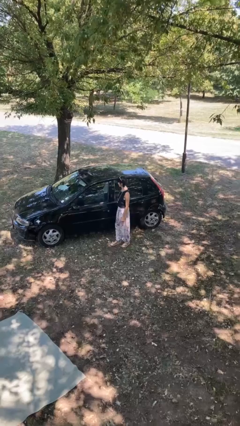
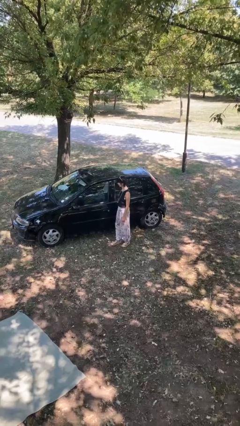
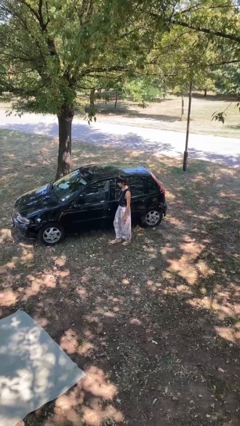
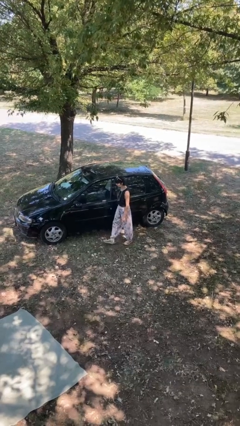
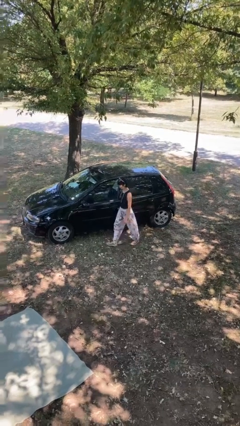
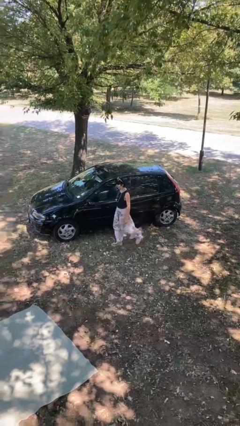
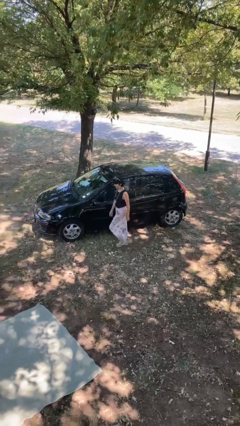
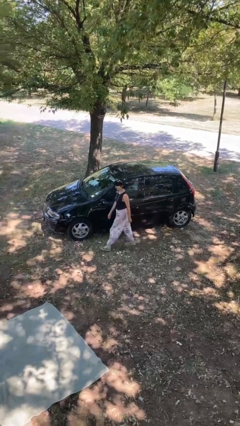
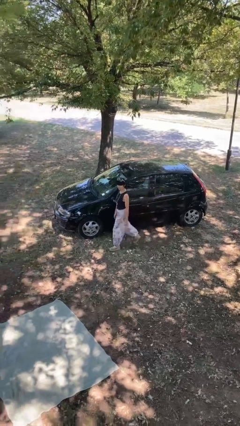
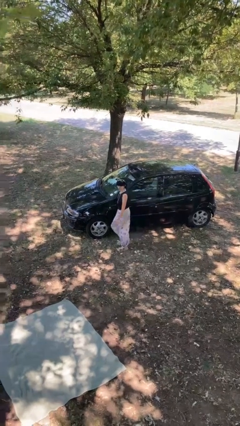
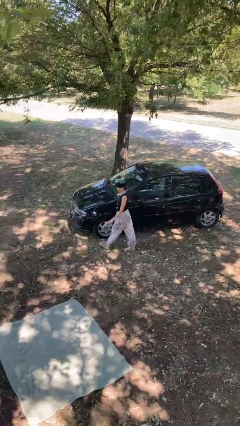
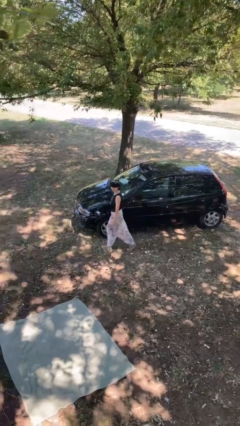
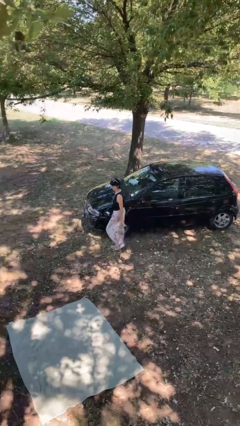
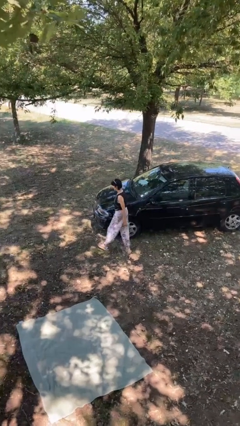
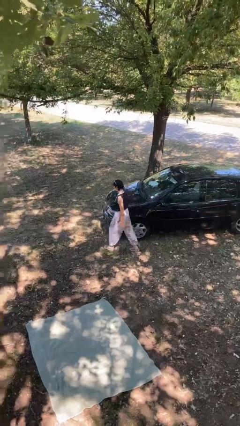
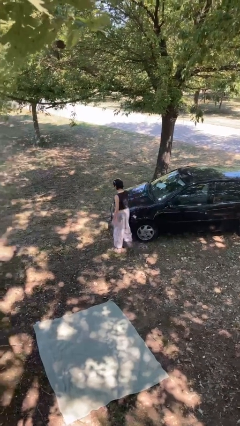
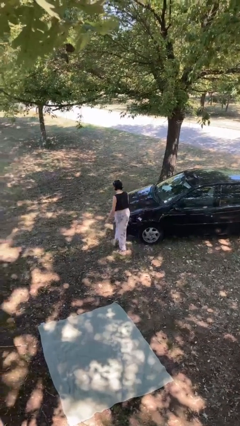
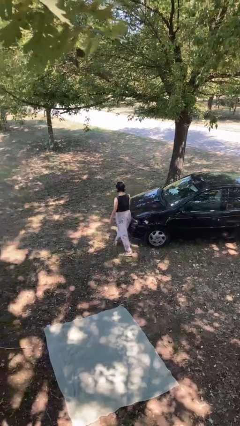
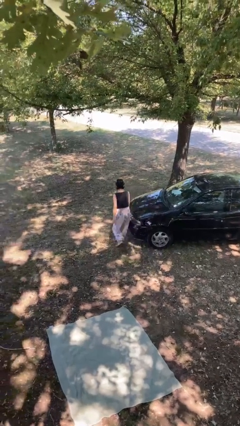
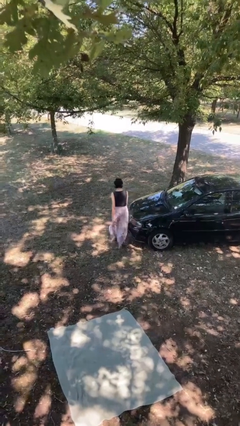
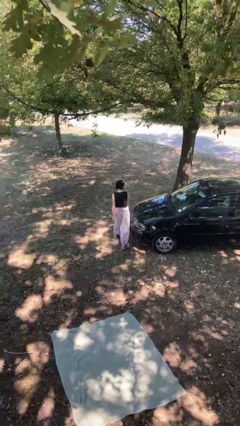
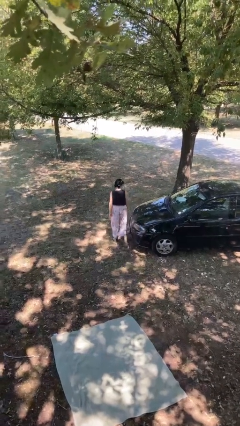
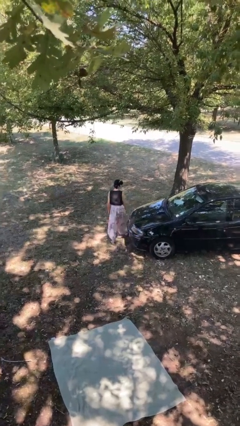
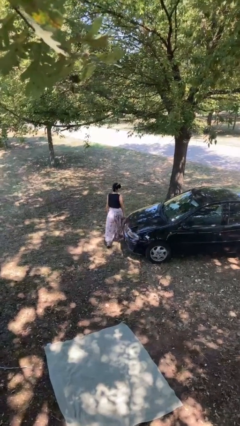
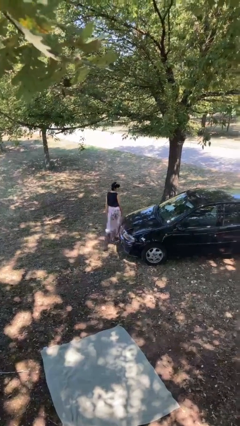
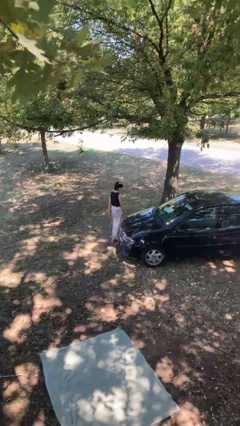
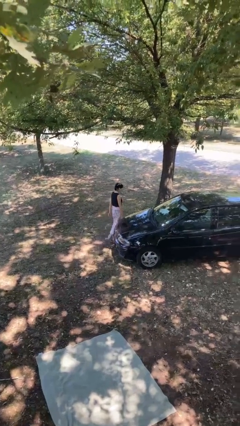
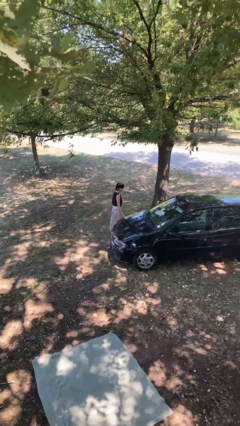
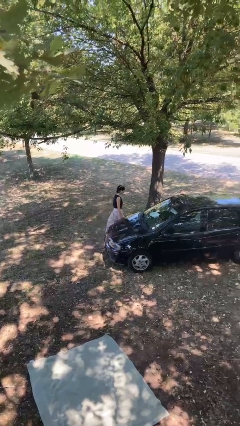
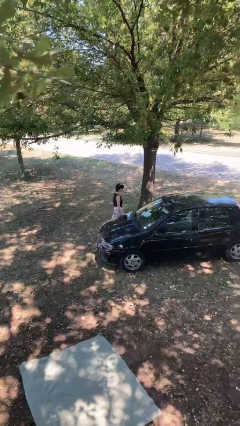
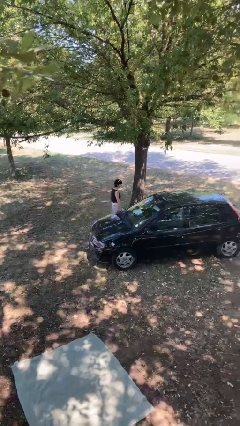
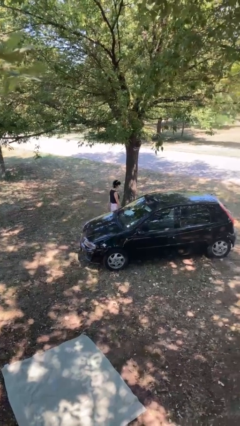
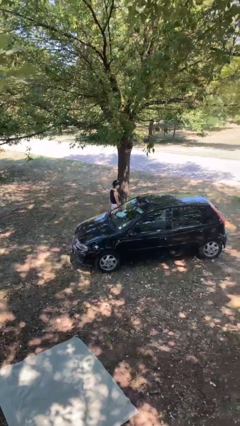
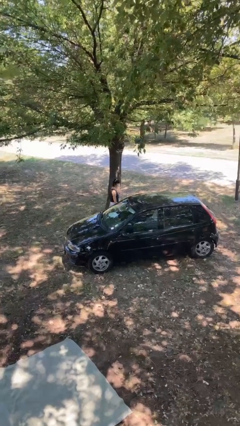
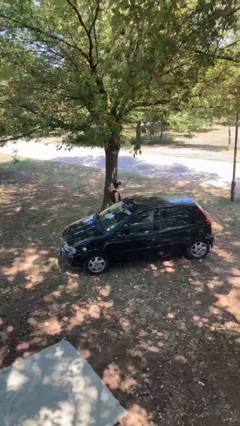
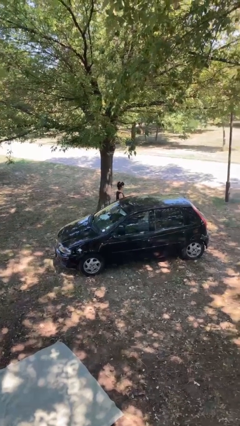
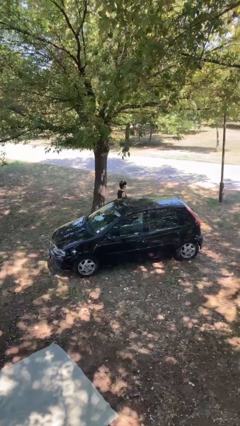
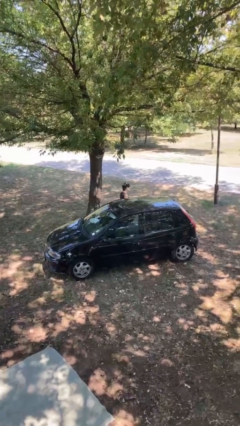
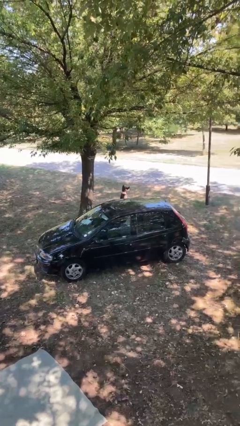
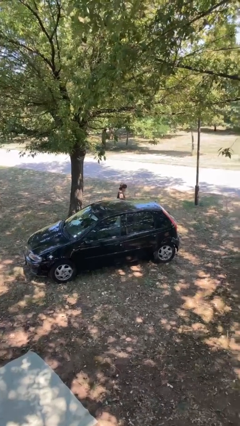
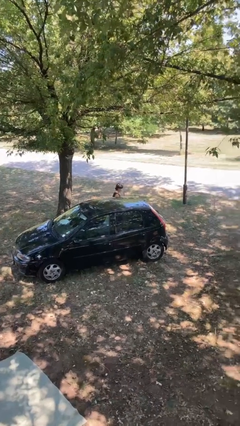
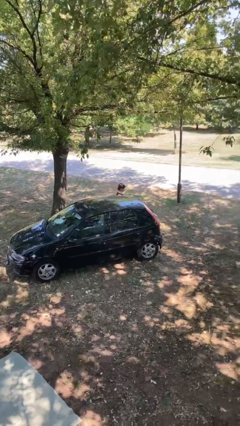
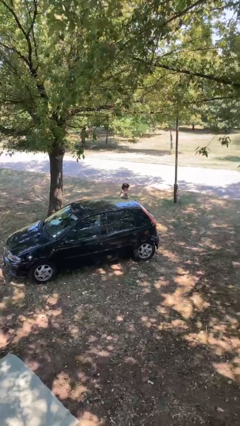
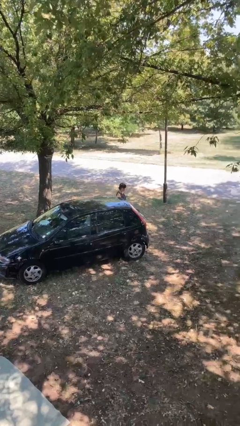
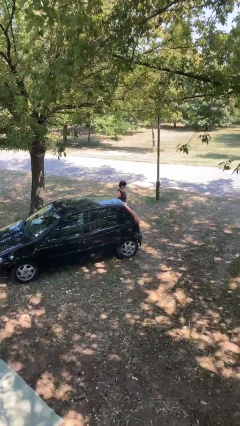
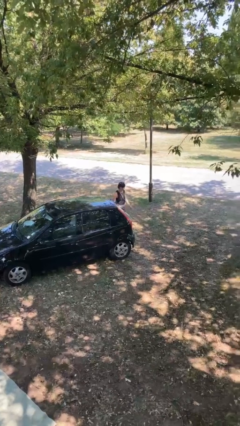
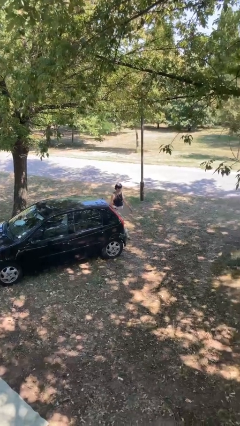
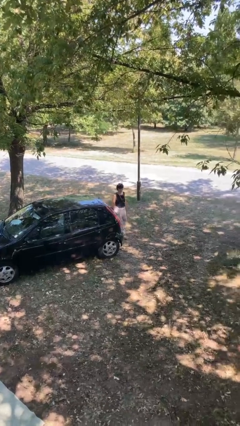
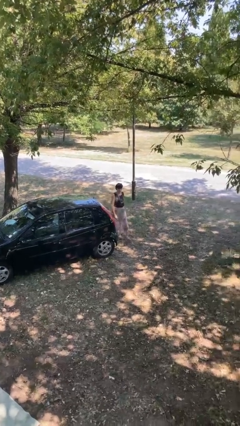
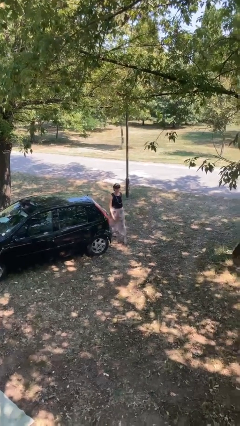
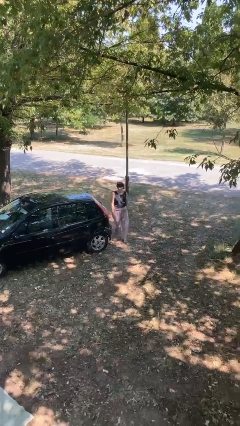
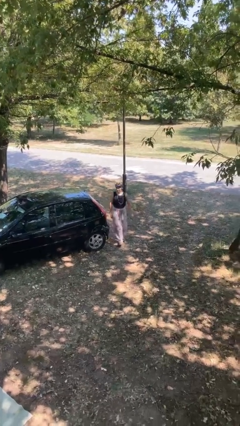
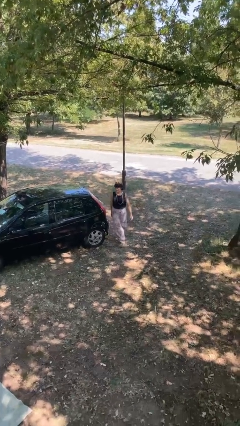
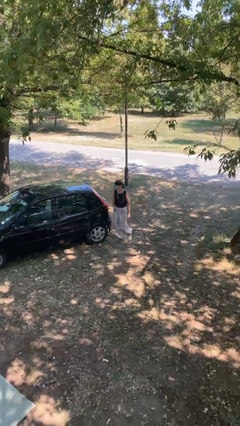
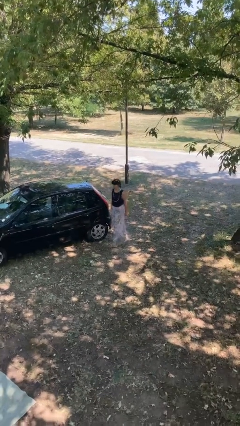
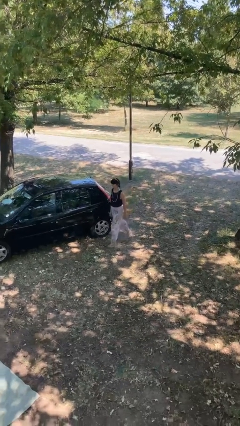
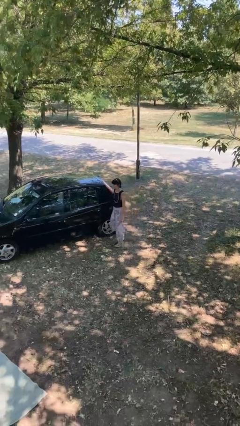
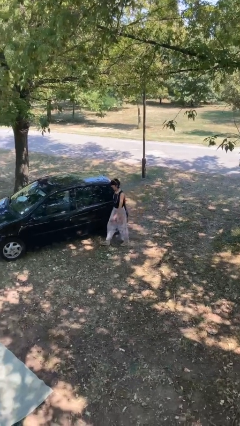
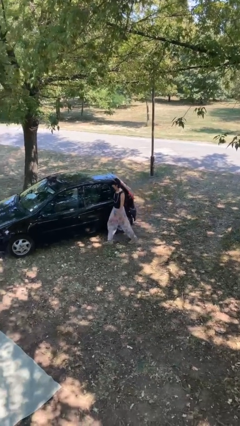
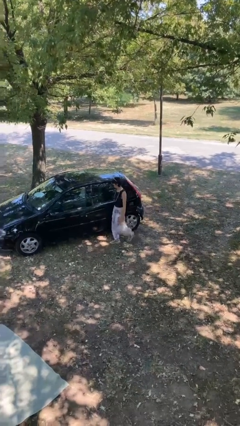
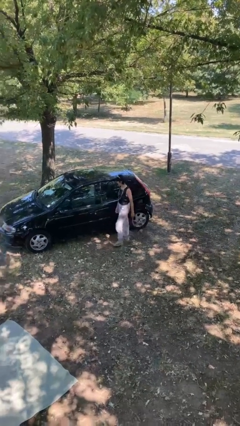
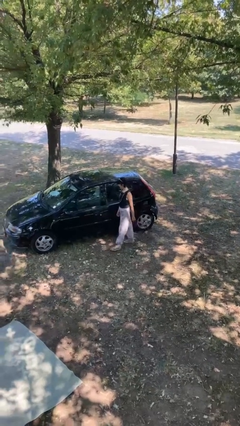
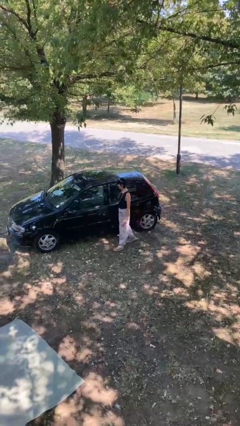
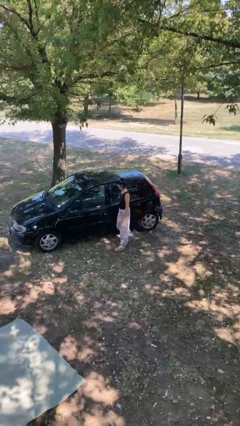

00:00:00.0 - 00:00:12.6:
person walks around car

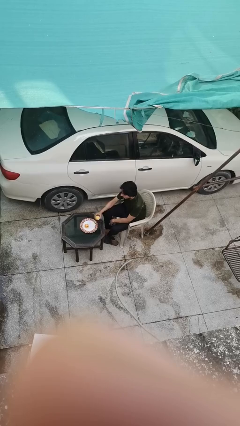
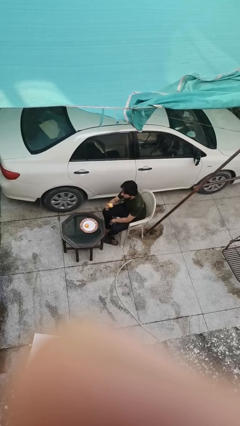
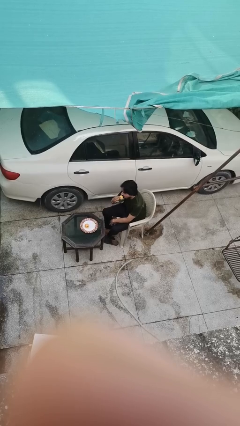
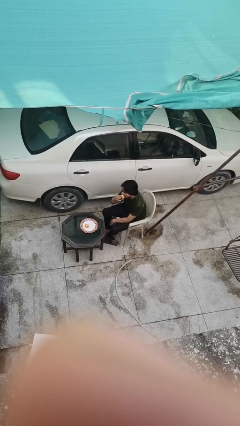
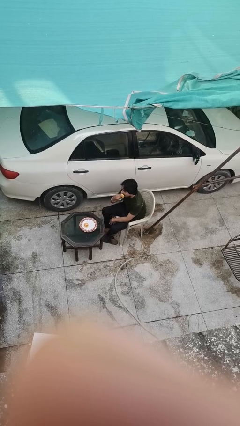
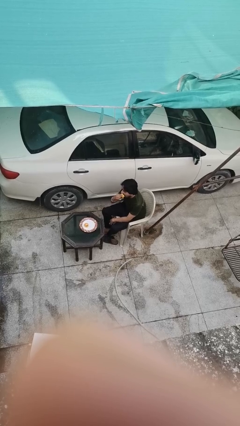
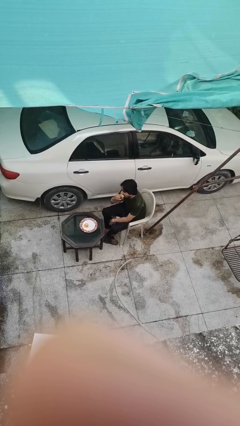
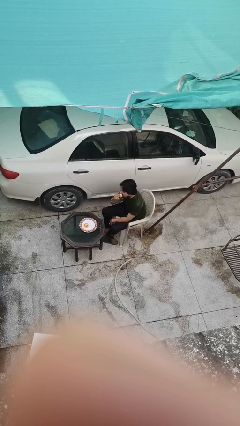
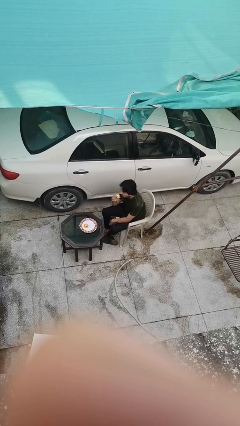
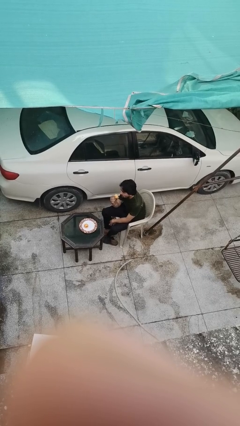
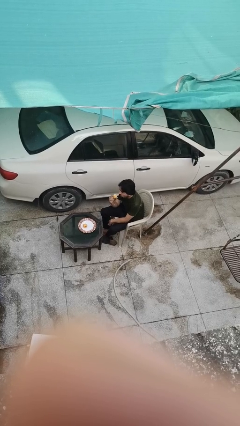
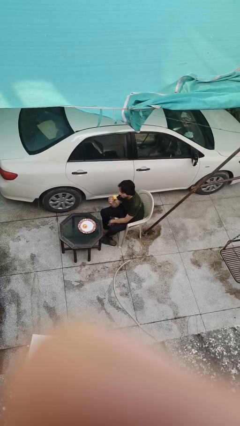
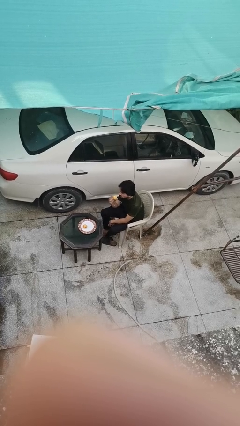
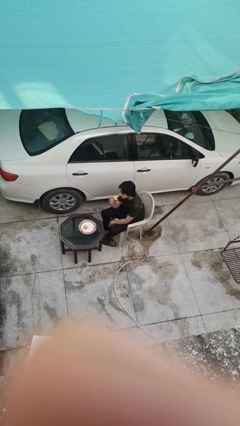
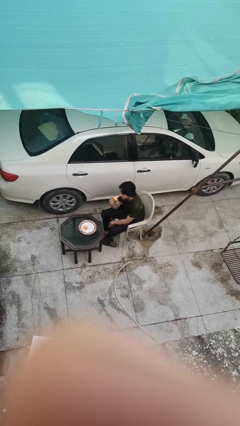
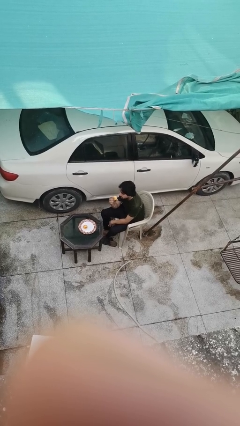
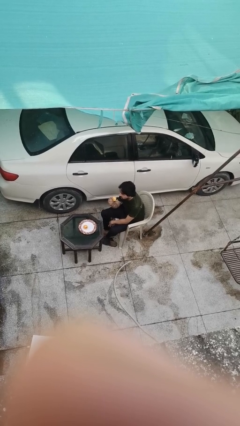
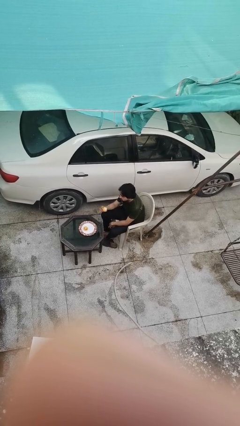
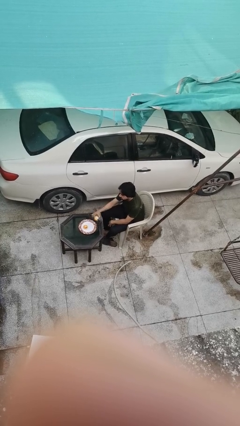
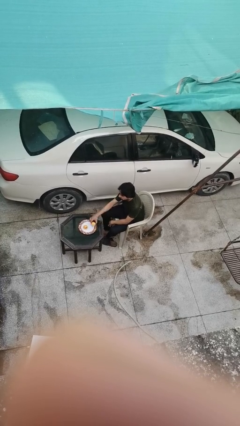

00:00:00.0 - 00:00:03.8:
person eats with hands

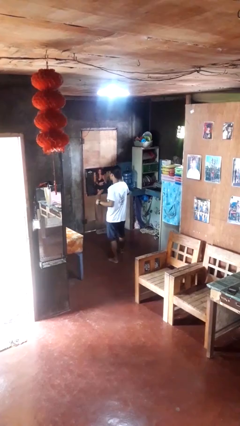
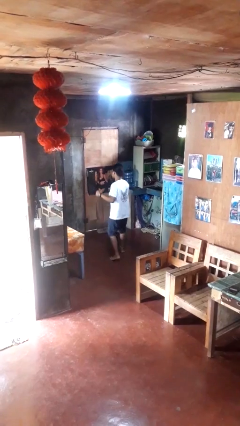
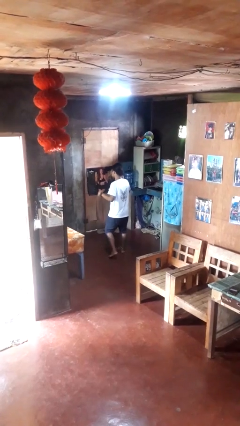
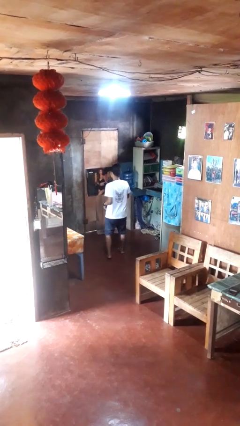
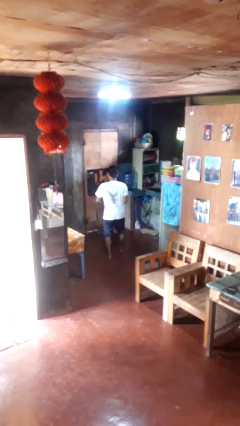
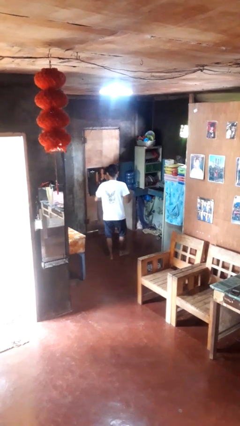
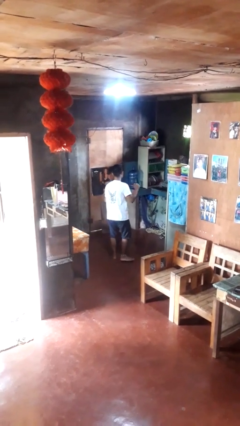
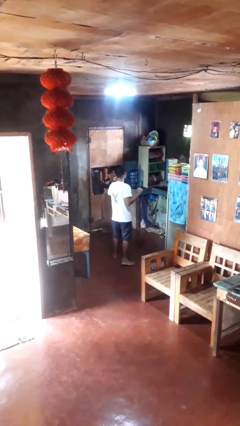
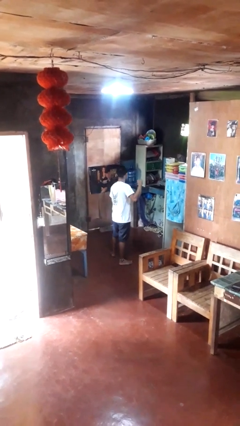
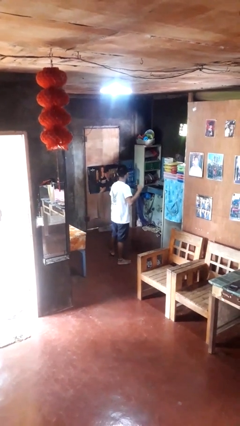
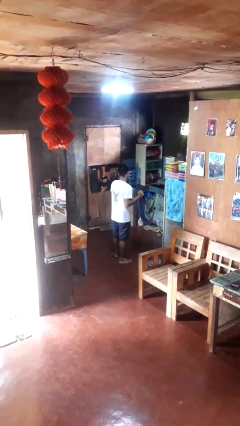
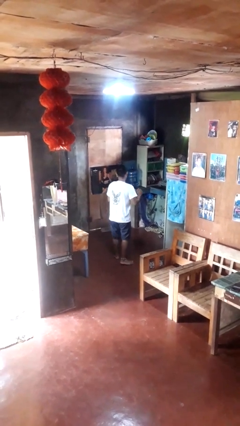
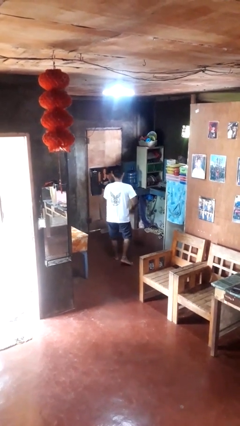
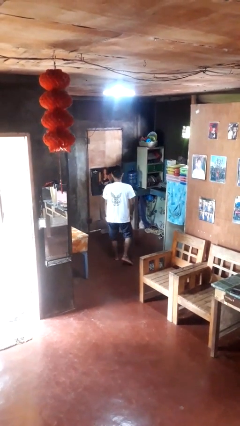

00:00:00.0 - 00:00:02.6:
person dances in place
